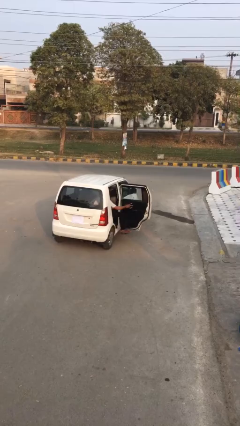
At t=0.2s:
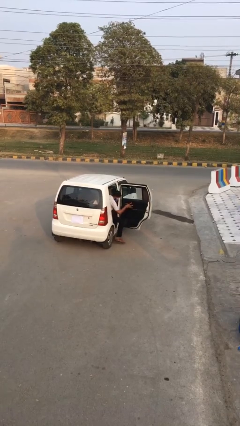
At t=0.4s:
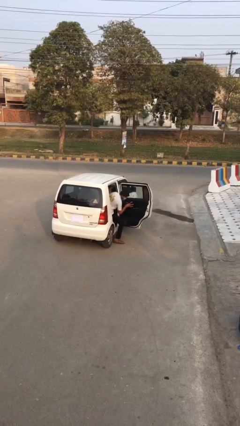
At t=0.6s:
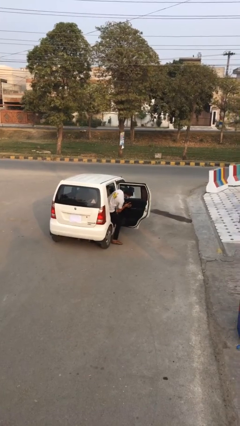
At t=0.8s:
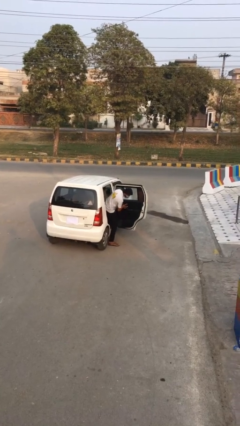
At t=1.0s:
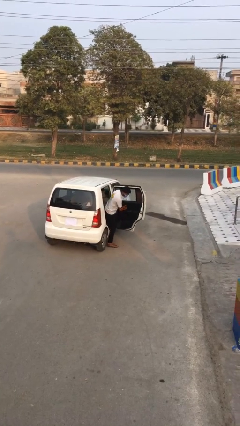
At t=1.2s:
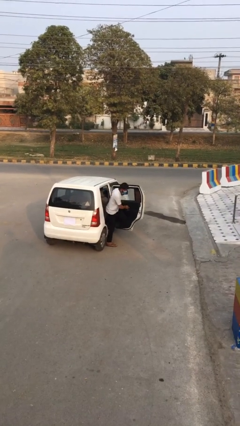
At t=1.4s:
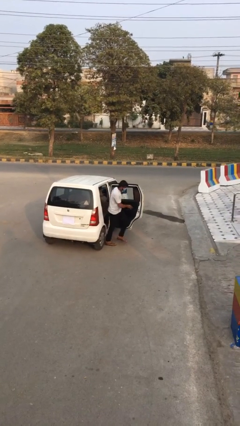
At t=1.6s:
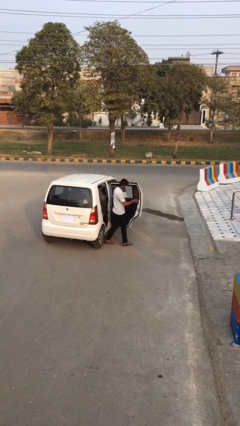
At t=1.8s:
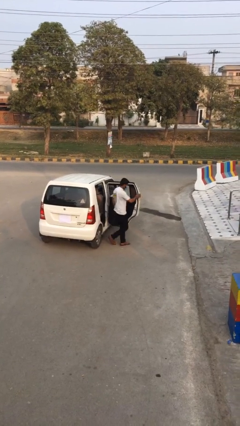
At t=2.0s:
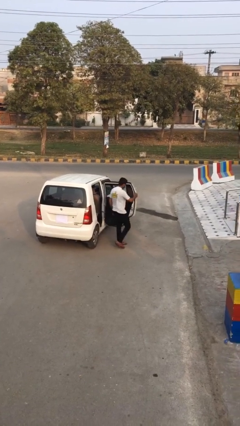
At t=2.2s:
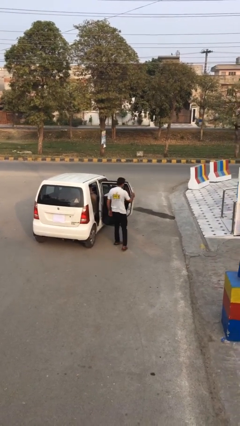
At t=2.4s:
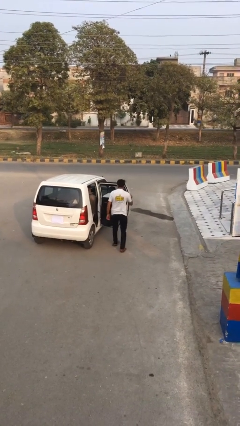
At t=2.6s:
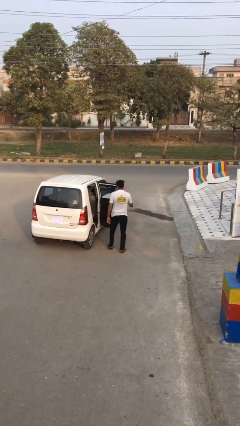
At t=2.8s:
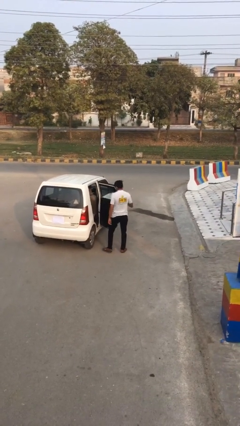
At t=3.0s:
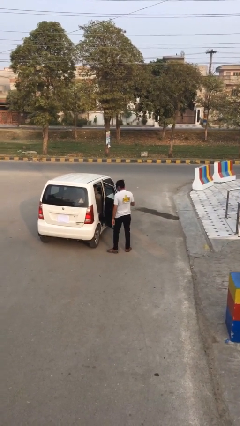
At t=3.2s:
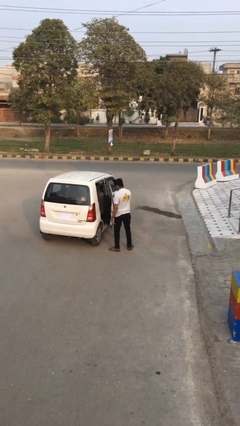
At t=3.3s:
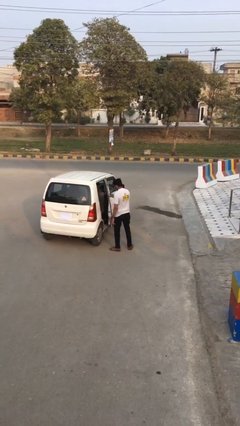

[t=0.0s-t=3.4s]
person exits car

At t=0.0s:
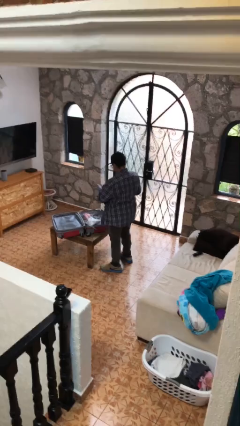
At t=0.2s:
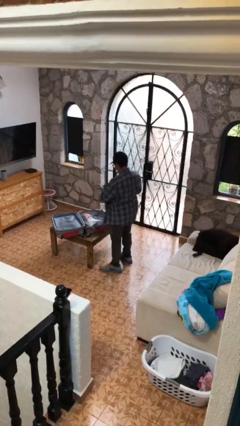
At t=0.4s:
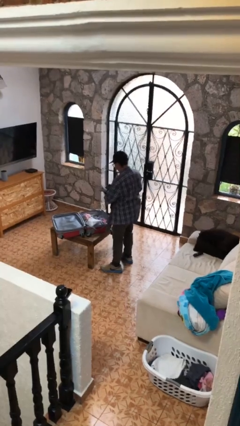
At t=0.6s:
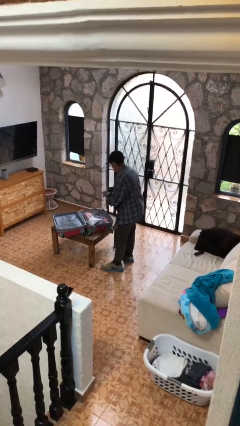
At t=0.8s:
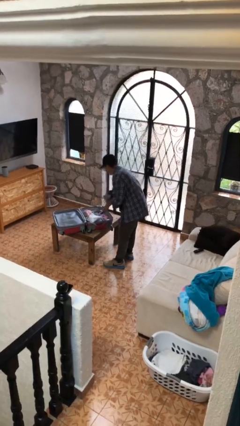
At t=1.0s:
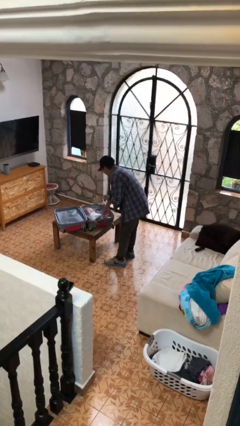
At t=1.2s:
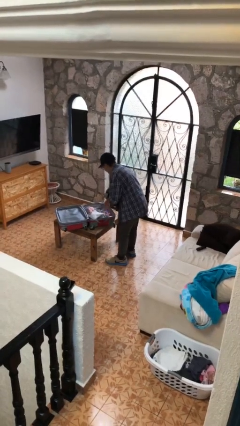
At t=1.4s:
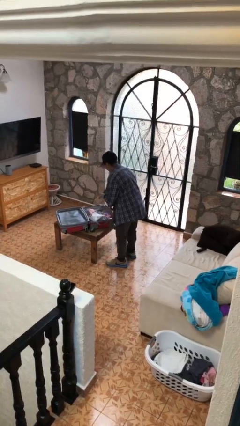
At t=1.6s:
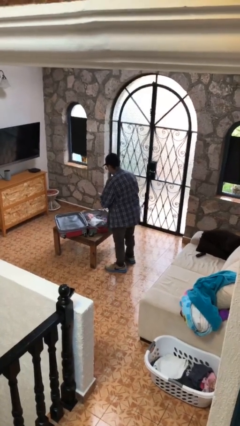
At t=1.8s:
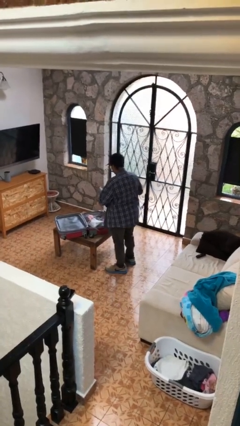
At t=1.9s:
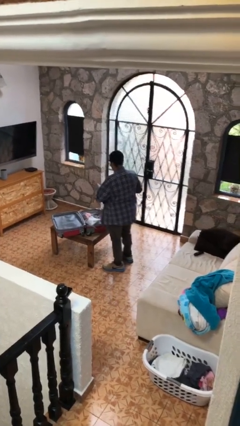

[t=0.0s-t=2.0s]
person loads clothes into suitcase

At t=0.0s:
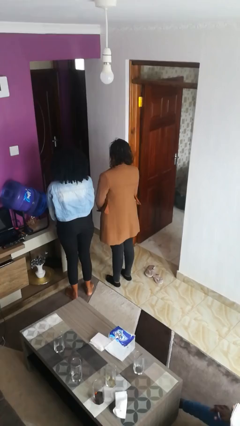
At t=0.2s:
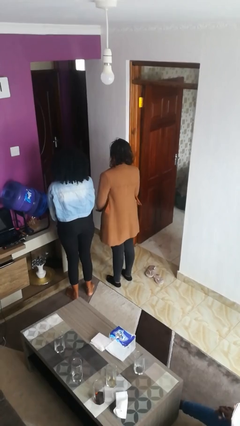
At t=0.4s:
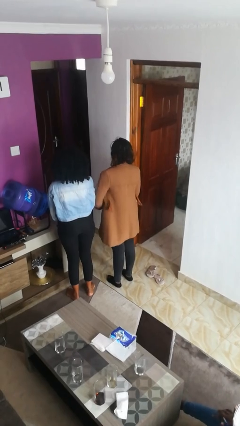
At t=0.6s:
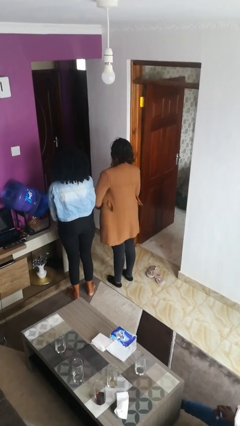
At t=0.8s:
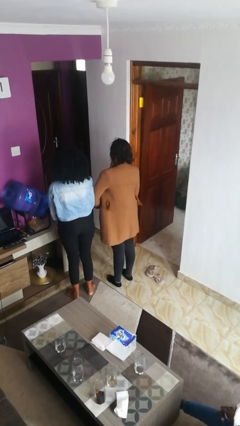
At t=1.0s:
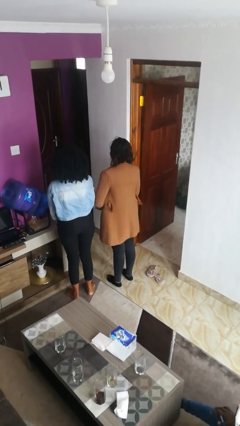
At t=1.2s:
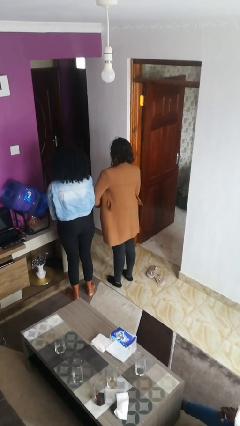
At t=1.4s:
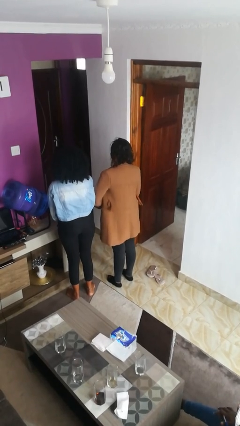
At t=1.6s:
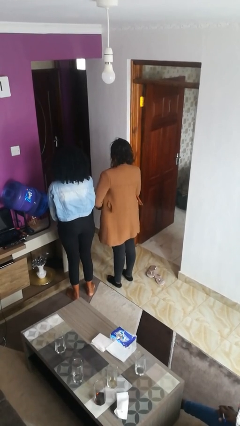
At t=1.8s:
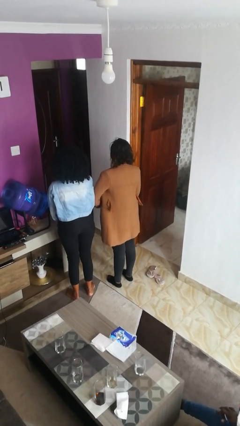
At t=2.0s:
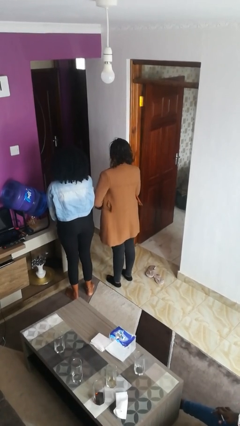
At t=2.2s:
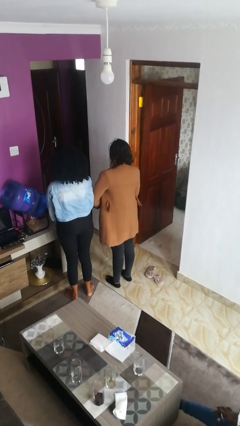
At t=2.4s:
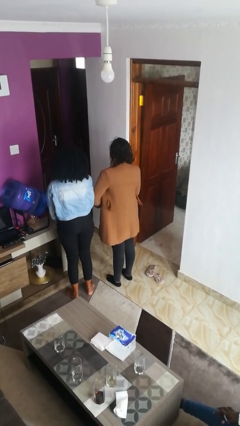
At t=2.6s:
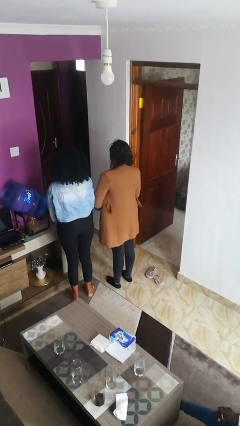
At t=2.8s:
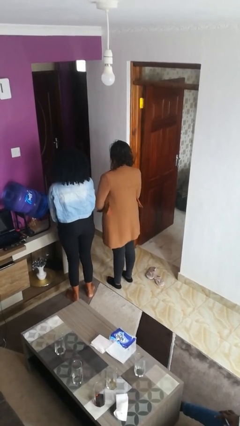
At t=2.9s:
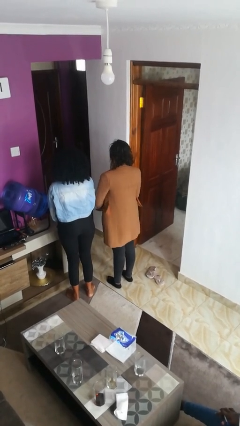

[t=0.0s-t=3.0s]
person nudges person with elbow
